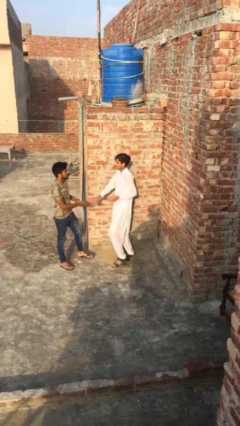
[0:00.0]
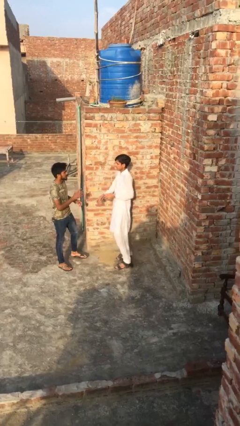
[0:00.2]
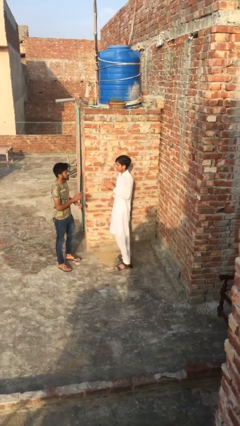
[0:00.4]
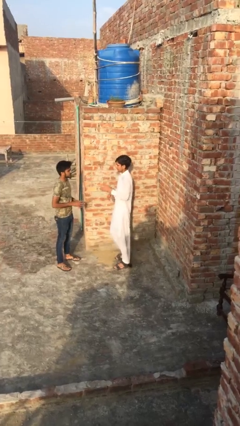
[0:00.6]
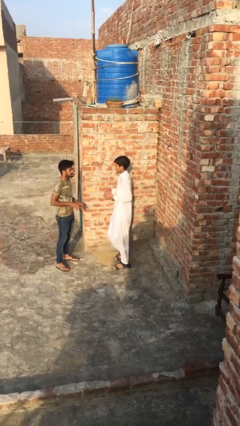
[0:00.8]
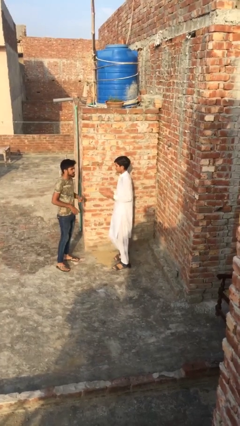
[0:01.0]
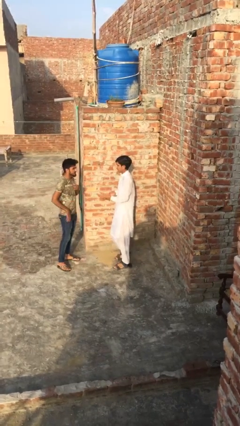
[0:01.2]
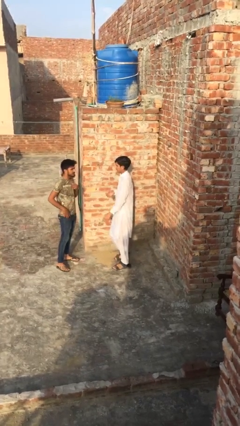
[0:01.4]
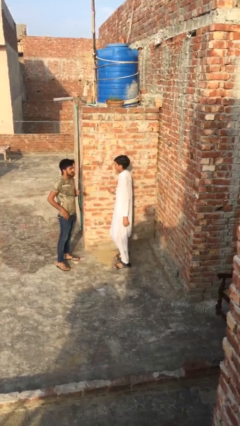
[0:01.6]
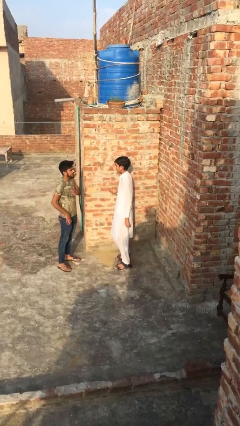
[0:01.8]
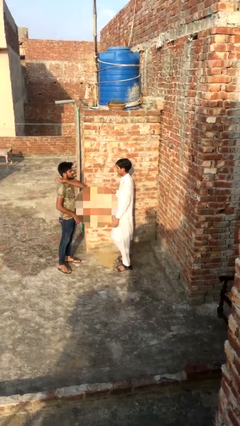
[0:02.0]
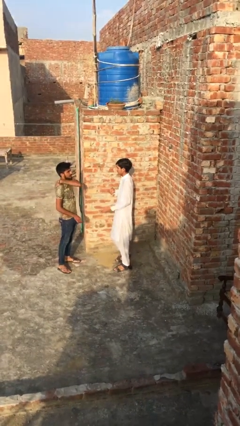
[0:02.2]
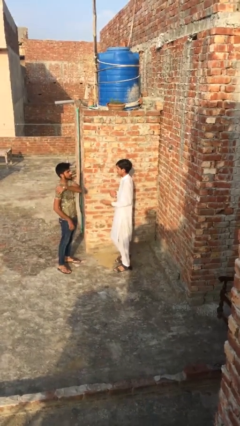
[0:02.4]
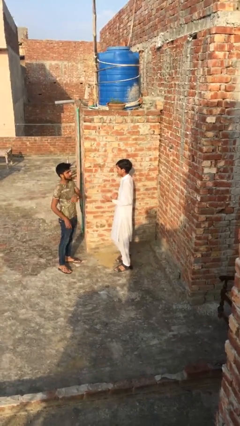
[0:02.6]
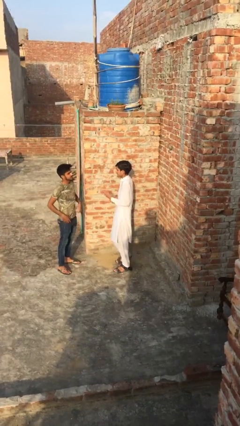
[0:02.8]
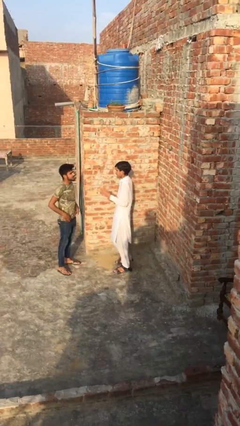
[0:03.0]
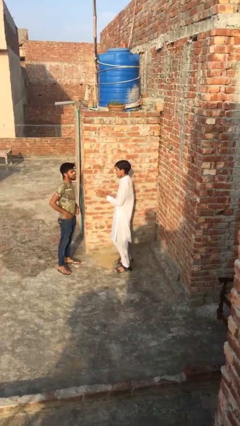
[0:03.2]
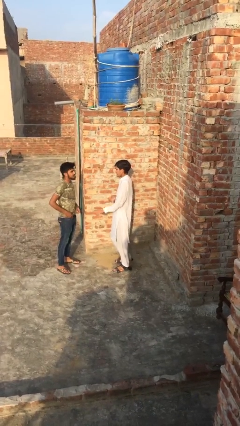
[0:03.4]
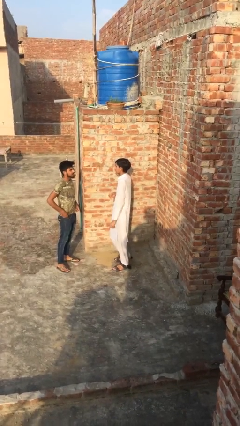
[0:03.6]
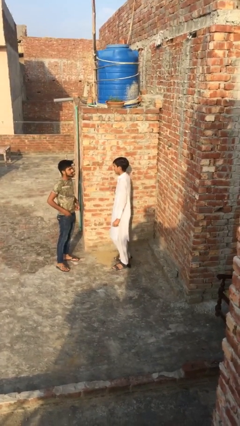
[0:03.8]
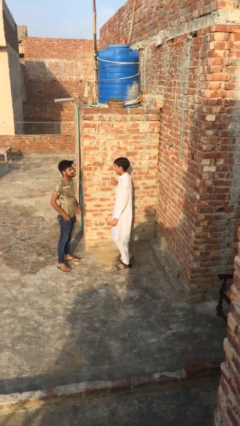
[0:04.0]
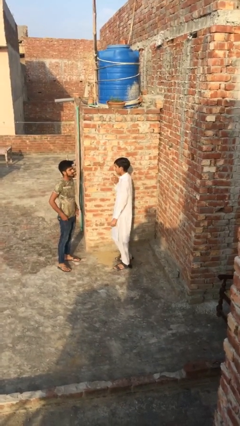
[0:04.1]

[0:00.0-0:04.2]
person talks to person

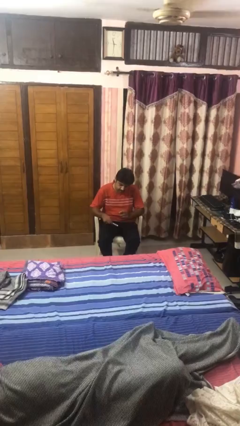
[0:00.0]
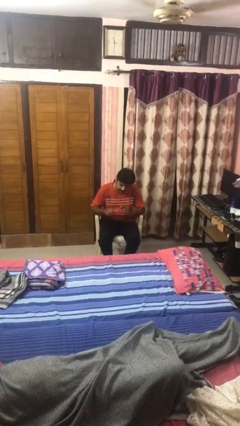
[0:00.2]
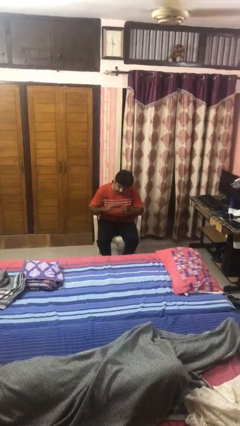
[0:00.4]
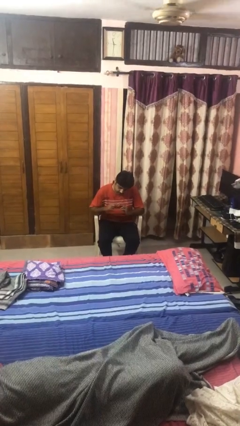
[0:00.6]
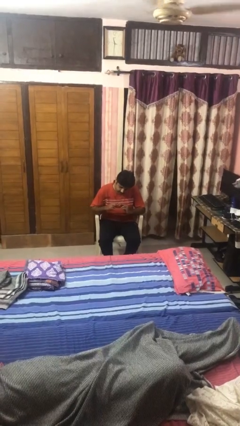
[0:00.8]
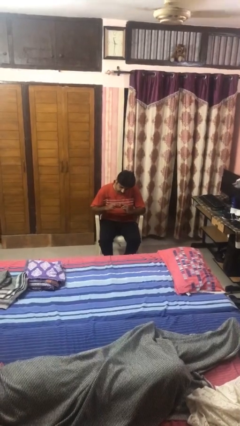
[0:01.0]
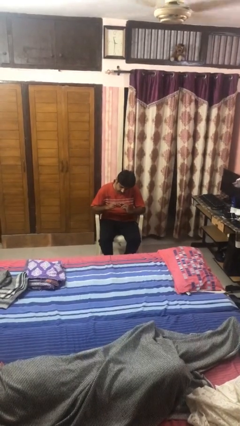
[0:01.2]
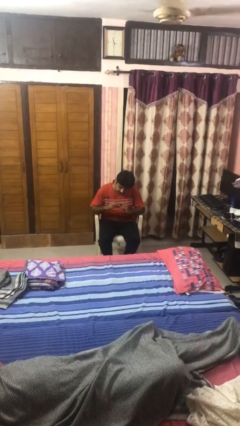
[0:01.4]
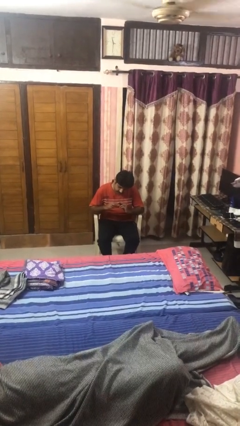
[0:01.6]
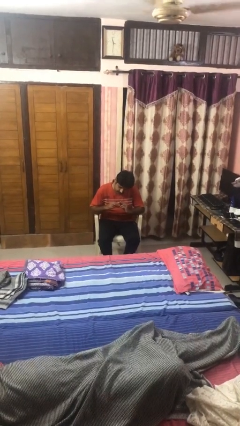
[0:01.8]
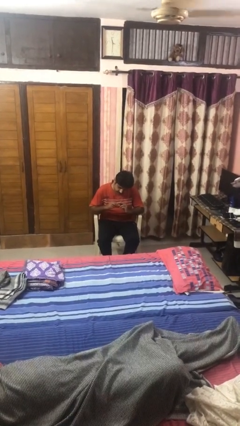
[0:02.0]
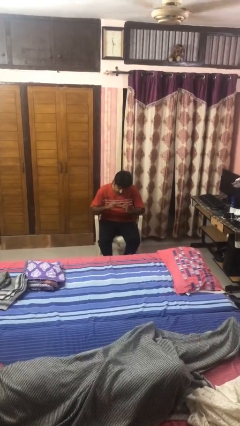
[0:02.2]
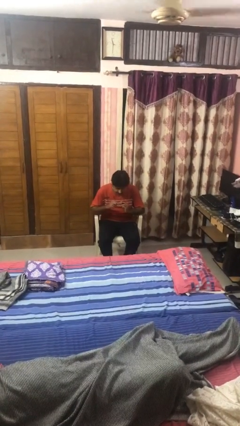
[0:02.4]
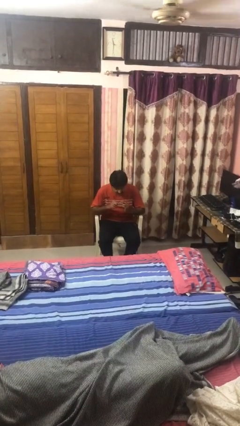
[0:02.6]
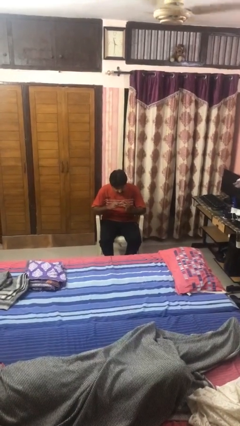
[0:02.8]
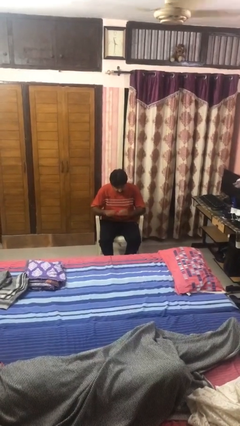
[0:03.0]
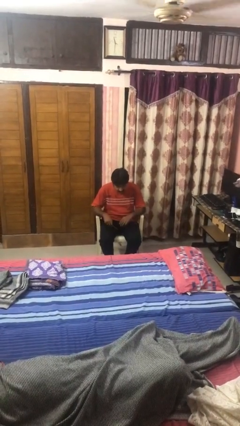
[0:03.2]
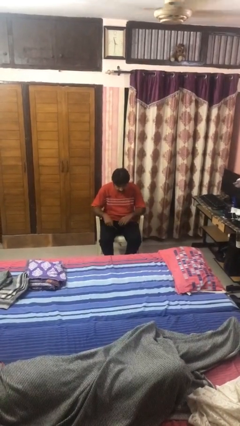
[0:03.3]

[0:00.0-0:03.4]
person files fingernails

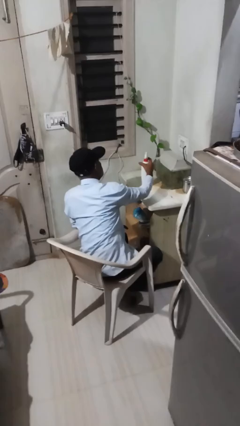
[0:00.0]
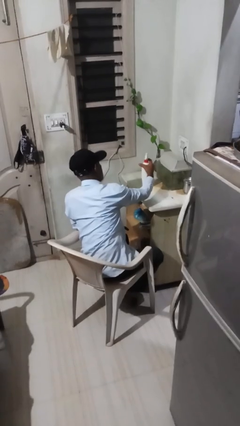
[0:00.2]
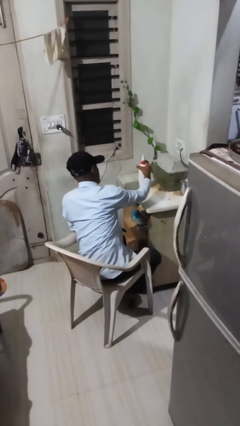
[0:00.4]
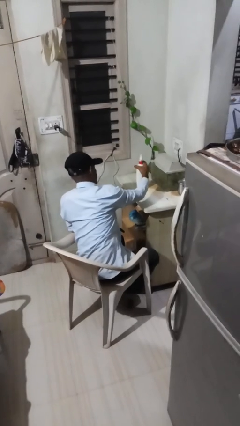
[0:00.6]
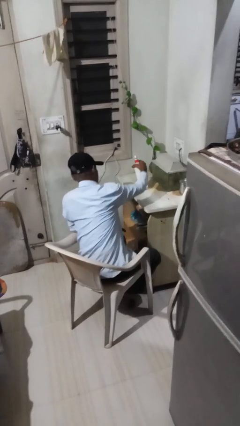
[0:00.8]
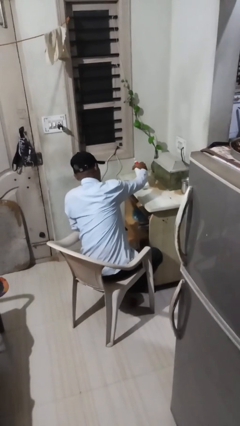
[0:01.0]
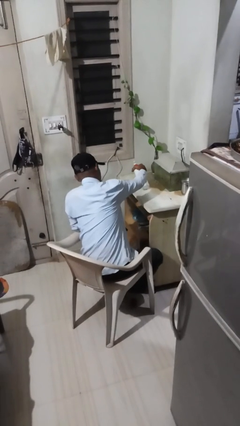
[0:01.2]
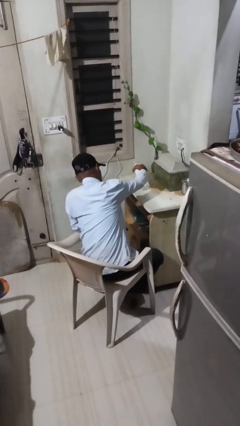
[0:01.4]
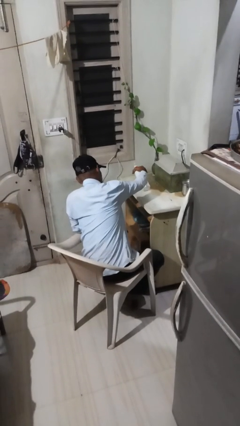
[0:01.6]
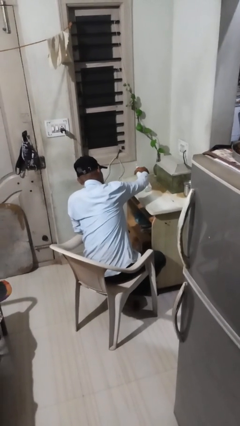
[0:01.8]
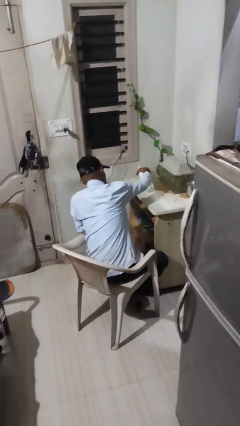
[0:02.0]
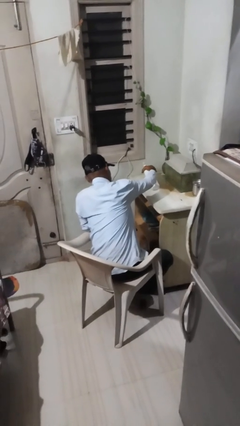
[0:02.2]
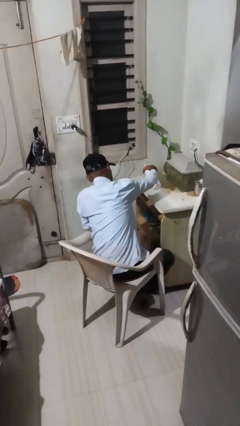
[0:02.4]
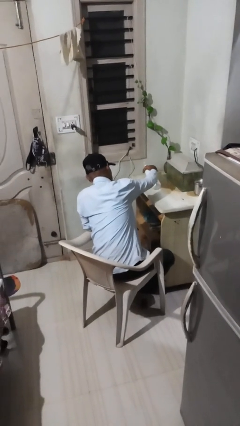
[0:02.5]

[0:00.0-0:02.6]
person sprays from bottle

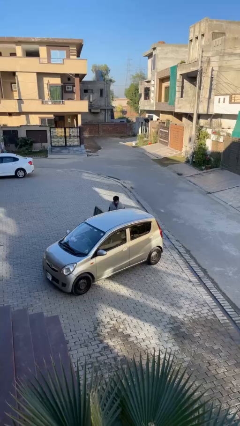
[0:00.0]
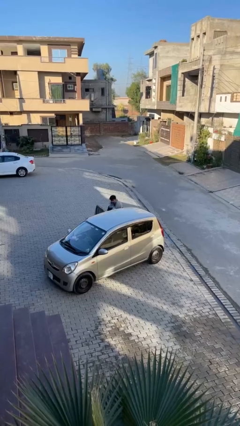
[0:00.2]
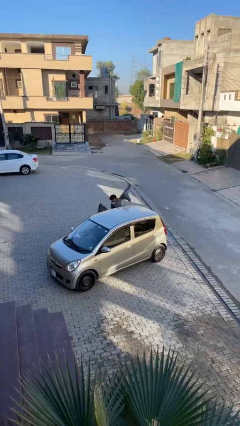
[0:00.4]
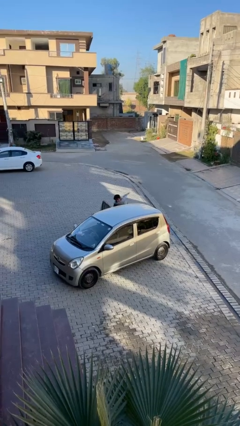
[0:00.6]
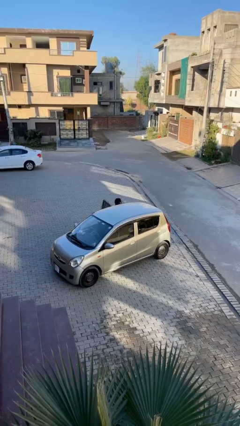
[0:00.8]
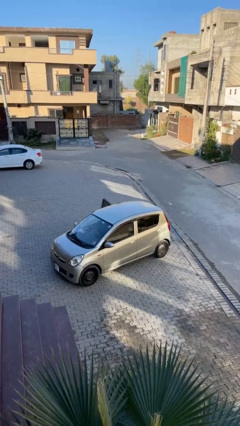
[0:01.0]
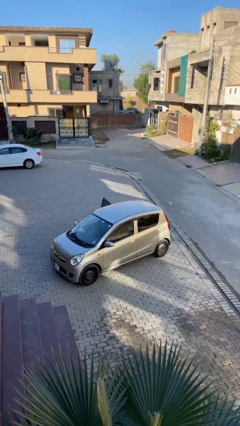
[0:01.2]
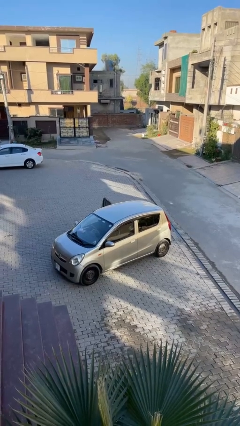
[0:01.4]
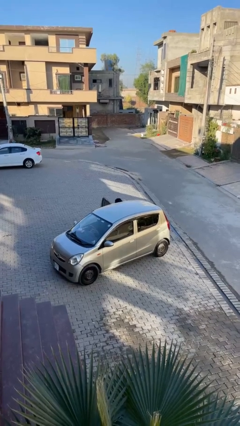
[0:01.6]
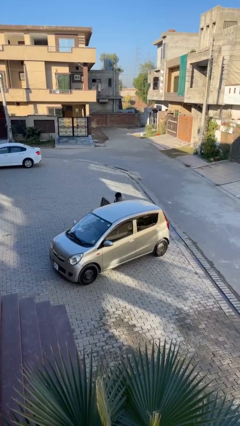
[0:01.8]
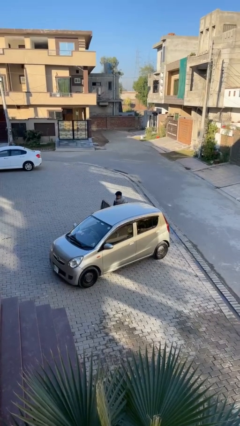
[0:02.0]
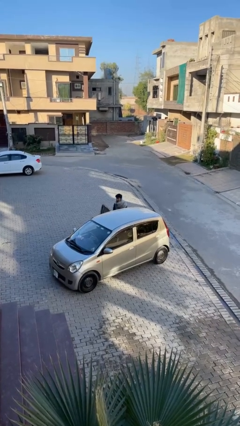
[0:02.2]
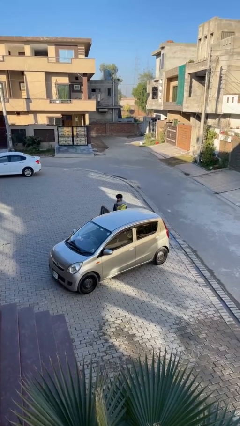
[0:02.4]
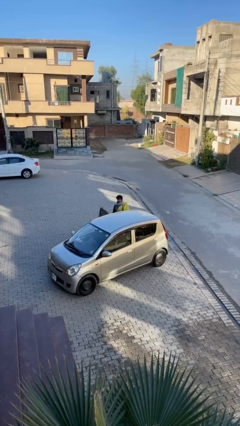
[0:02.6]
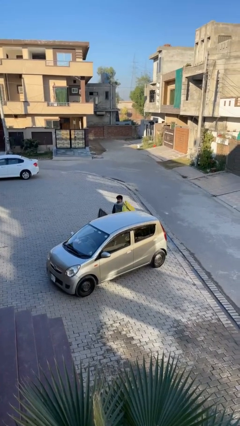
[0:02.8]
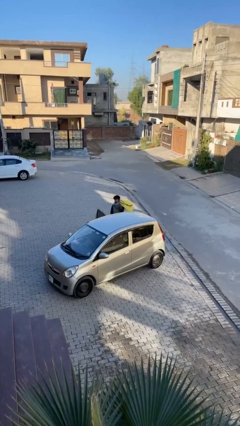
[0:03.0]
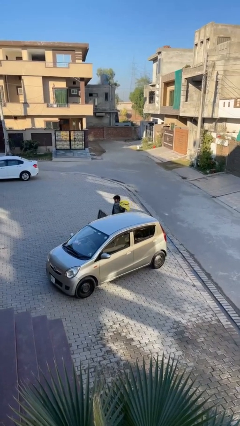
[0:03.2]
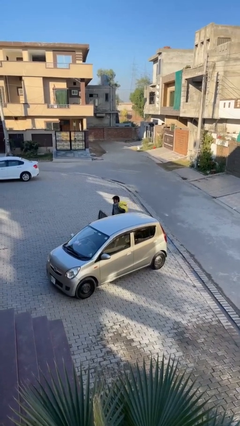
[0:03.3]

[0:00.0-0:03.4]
person unloads car

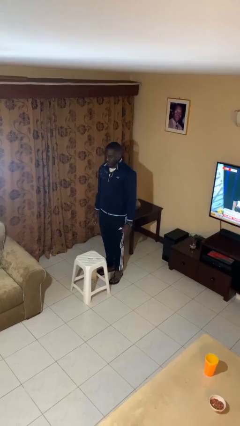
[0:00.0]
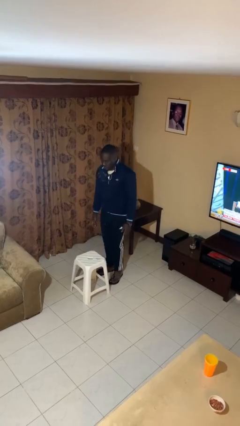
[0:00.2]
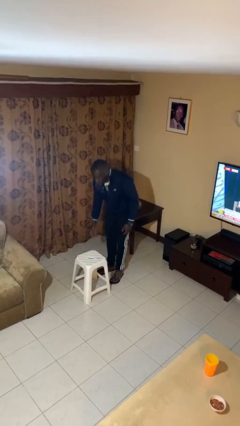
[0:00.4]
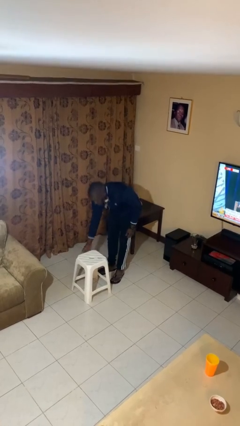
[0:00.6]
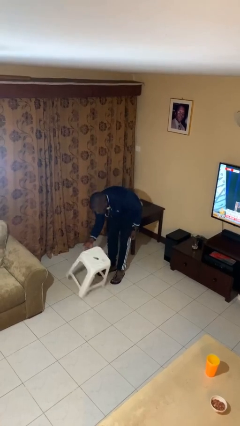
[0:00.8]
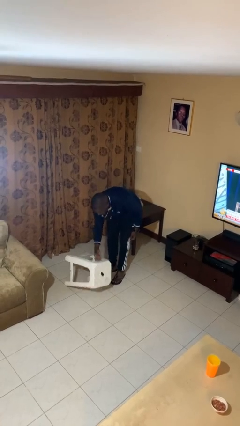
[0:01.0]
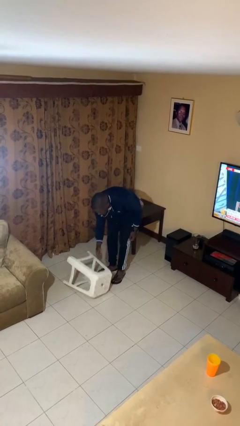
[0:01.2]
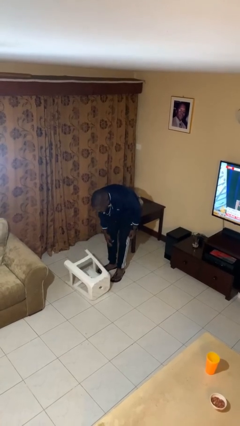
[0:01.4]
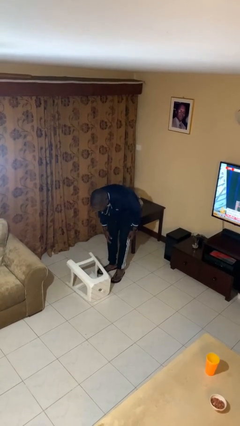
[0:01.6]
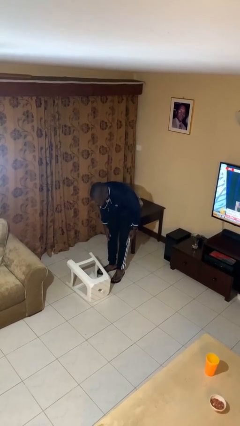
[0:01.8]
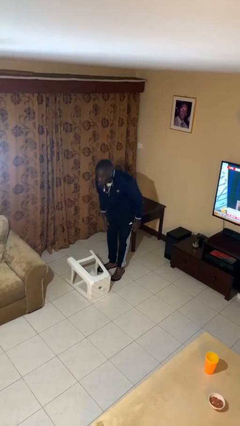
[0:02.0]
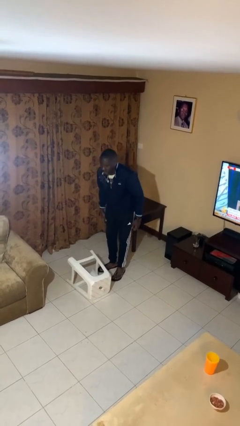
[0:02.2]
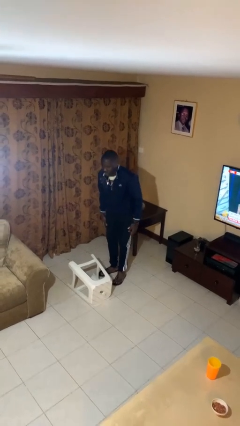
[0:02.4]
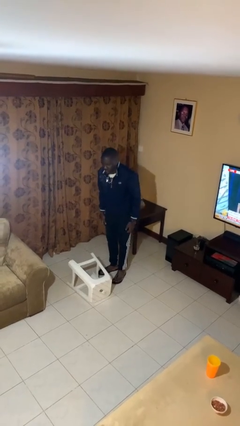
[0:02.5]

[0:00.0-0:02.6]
person knocks over furniture

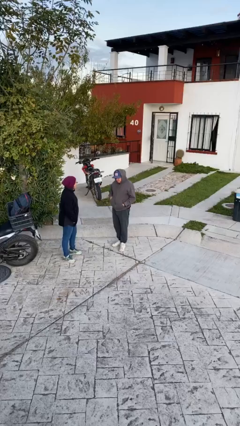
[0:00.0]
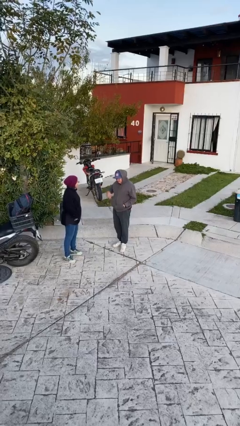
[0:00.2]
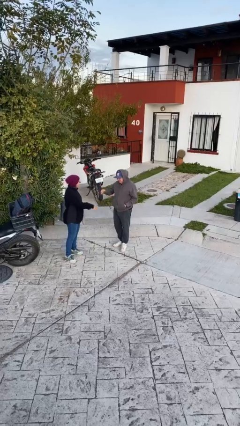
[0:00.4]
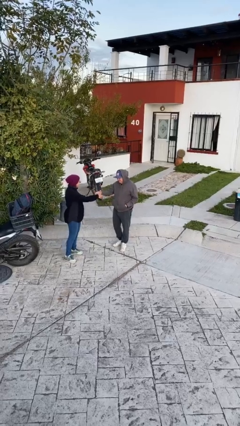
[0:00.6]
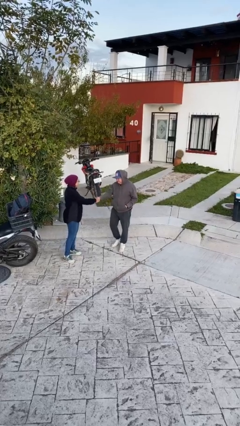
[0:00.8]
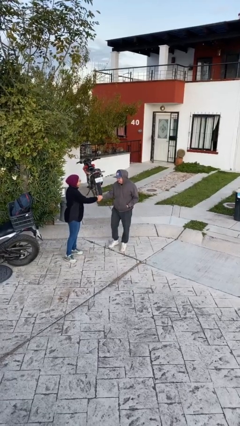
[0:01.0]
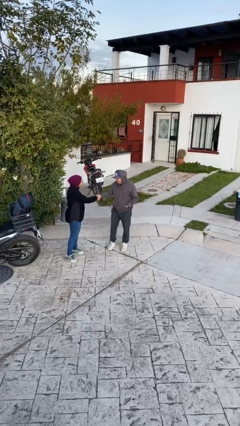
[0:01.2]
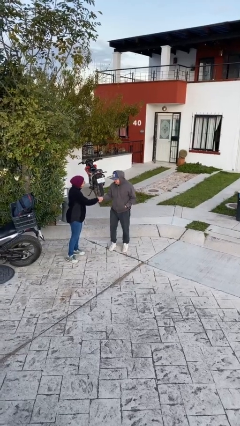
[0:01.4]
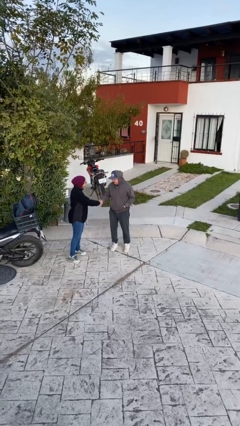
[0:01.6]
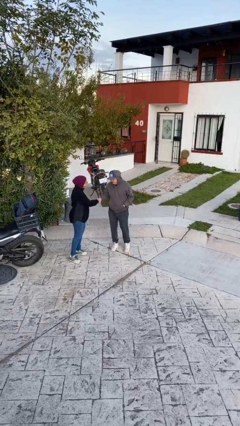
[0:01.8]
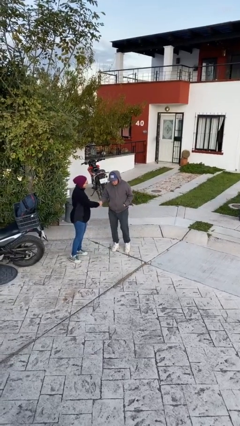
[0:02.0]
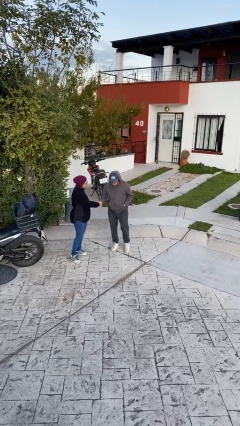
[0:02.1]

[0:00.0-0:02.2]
person shakes hand
